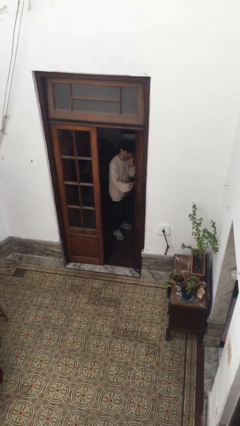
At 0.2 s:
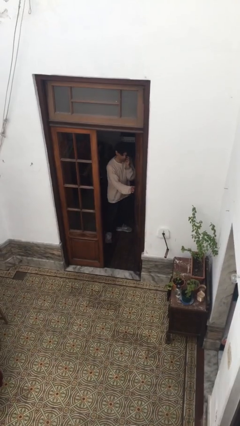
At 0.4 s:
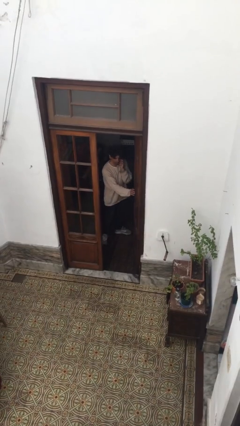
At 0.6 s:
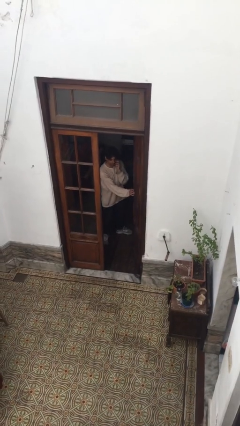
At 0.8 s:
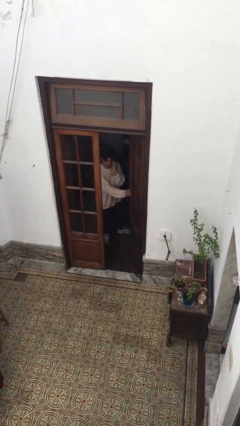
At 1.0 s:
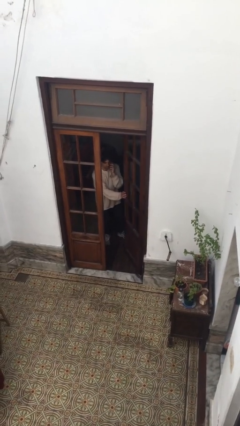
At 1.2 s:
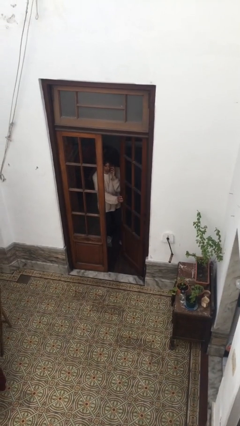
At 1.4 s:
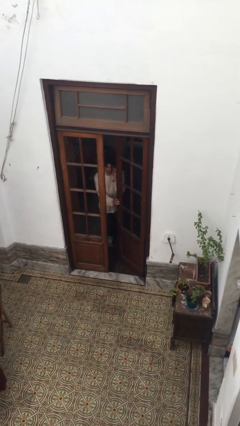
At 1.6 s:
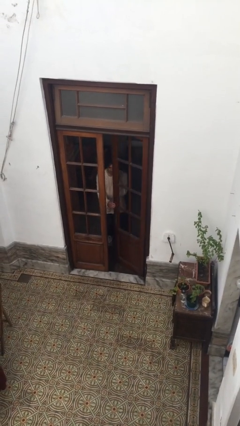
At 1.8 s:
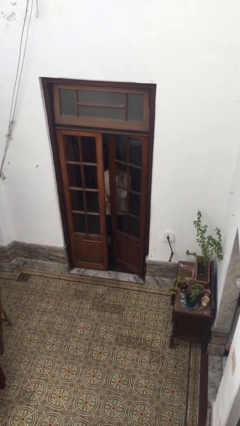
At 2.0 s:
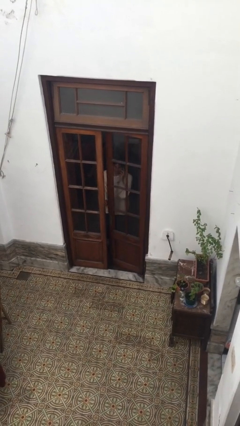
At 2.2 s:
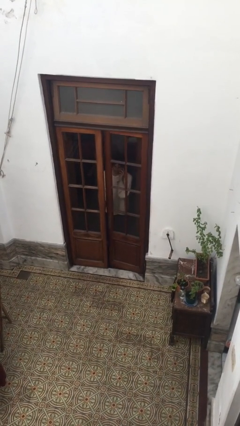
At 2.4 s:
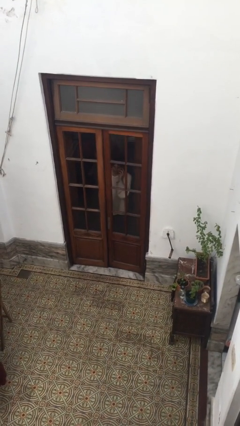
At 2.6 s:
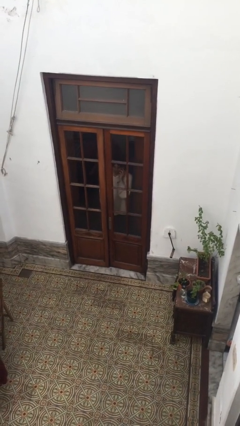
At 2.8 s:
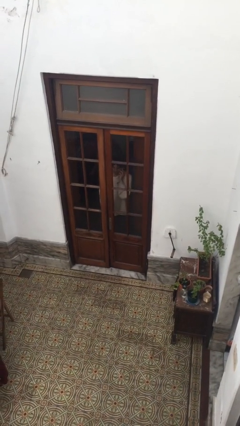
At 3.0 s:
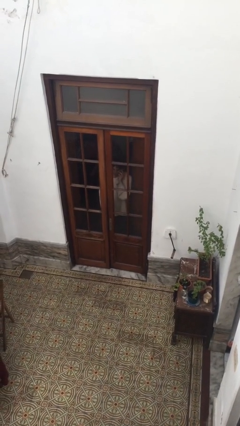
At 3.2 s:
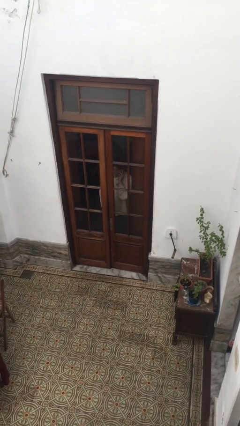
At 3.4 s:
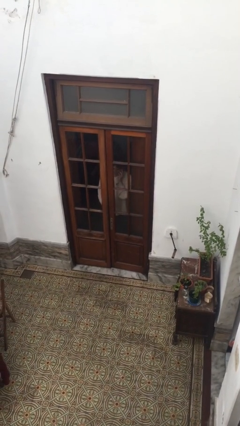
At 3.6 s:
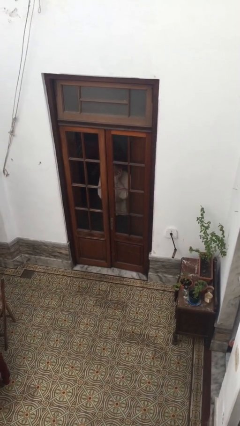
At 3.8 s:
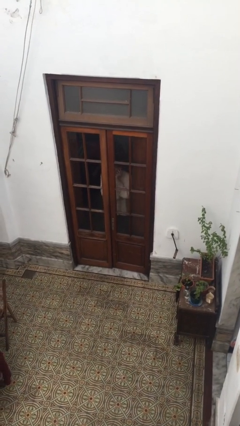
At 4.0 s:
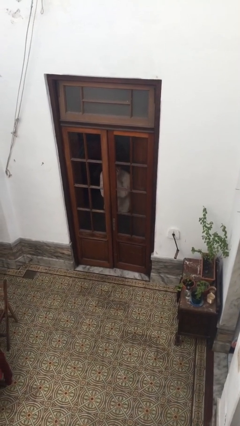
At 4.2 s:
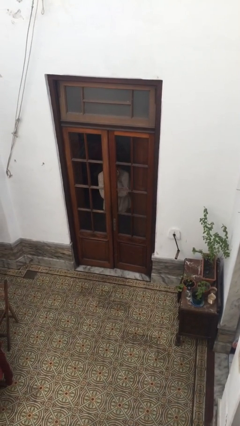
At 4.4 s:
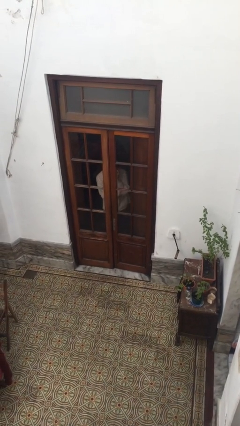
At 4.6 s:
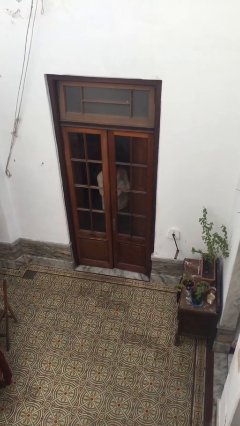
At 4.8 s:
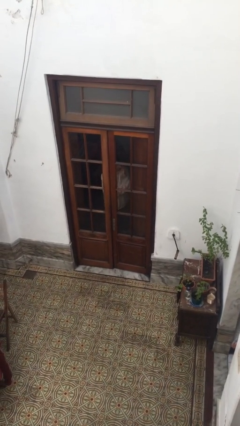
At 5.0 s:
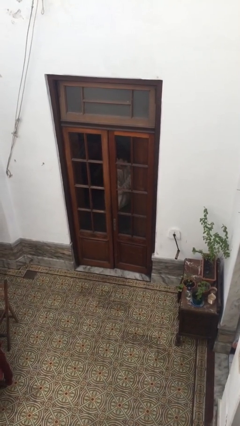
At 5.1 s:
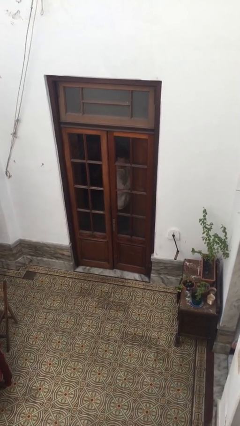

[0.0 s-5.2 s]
person closes facility door

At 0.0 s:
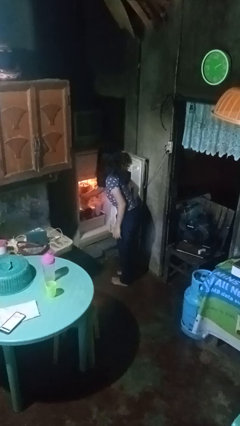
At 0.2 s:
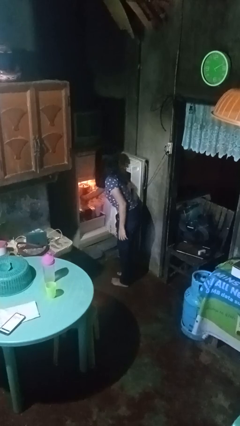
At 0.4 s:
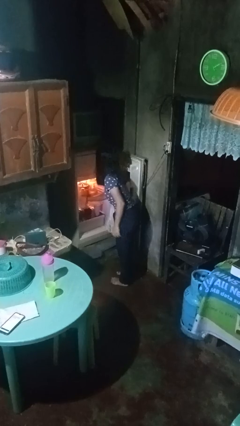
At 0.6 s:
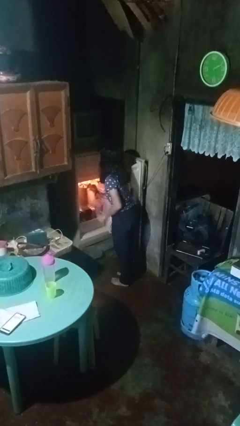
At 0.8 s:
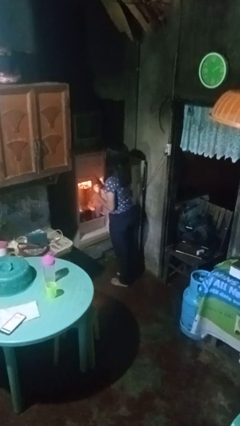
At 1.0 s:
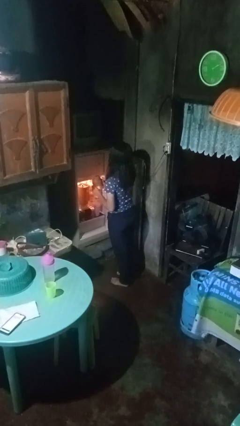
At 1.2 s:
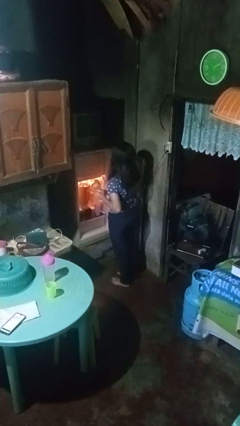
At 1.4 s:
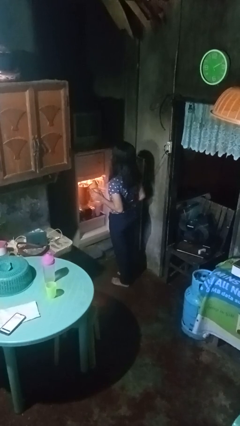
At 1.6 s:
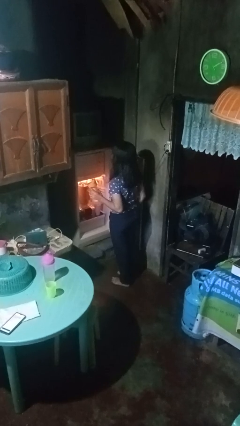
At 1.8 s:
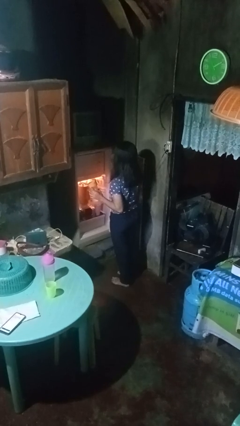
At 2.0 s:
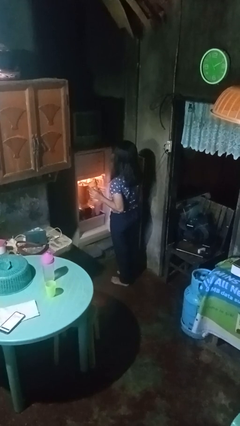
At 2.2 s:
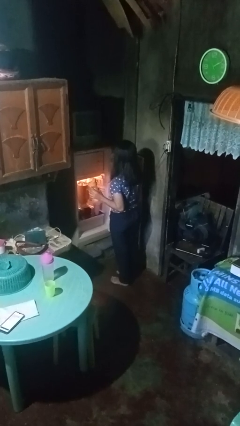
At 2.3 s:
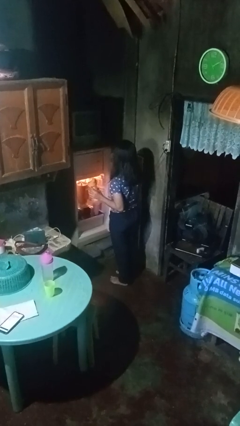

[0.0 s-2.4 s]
person takes object from refrigerator

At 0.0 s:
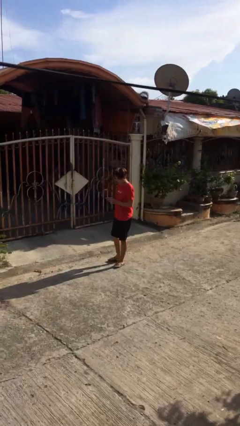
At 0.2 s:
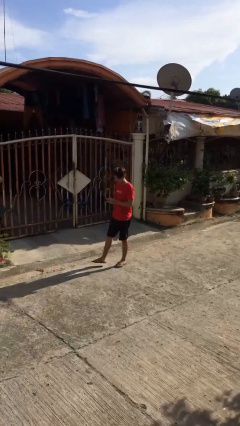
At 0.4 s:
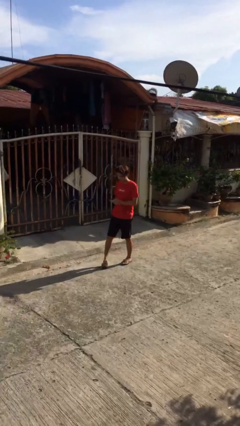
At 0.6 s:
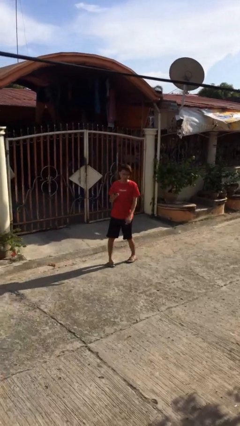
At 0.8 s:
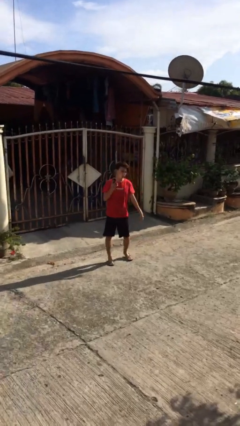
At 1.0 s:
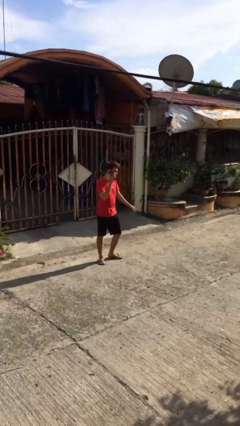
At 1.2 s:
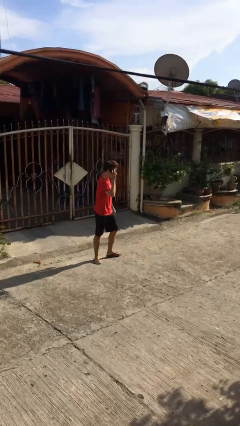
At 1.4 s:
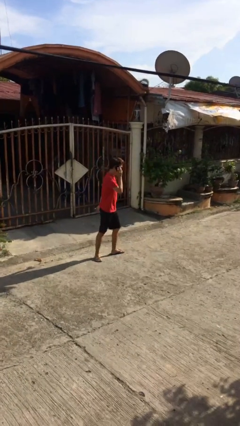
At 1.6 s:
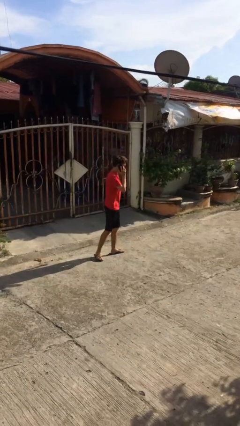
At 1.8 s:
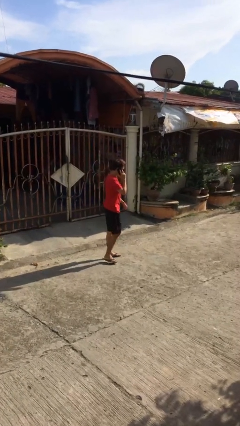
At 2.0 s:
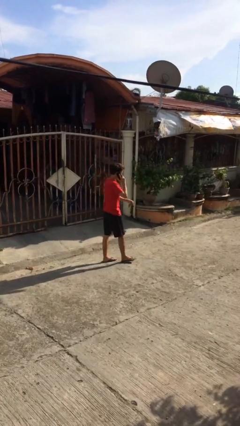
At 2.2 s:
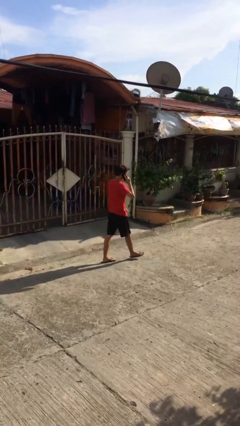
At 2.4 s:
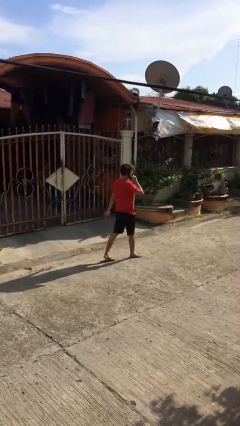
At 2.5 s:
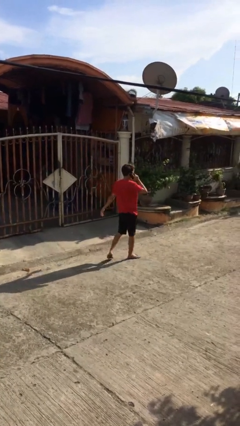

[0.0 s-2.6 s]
person talks on phone

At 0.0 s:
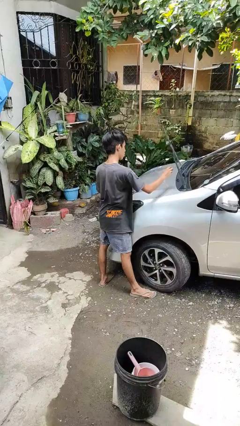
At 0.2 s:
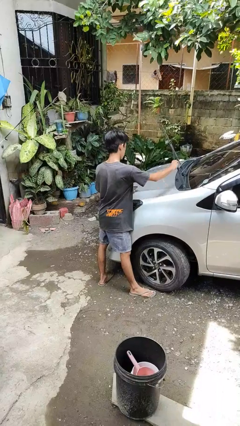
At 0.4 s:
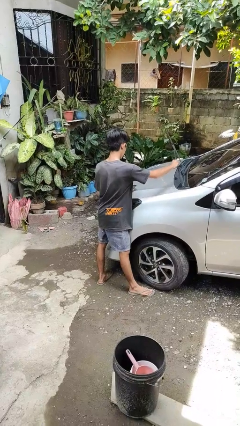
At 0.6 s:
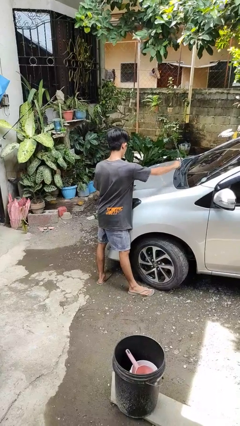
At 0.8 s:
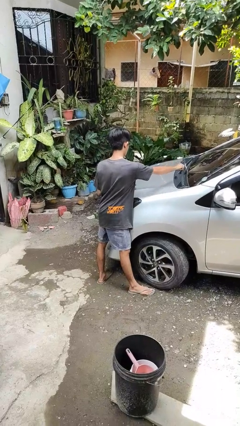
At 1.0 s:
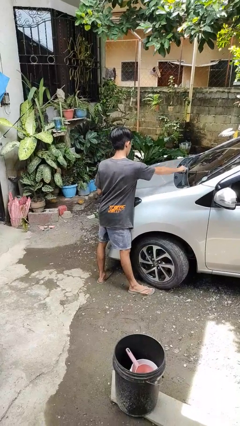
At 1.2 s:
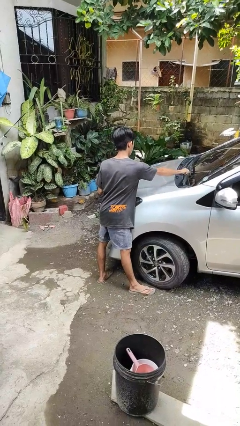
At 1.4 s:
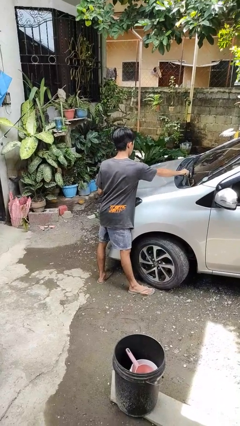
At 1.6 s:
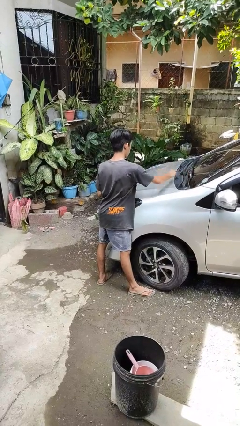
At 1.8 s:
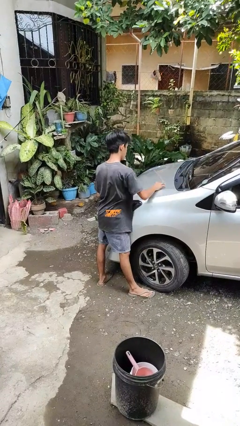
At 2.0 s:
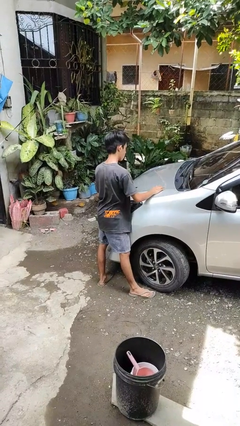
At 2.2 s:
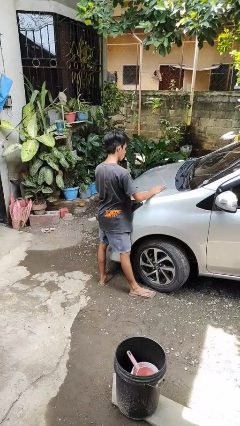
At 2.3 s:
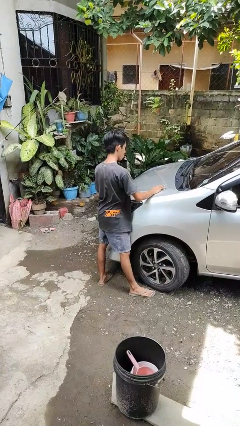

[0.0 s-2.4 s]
person flips down car wipers

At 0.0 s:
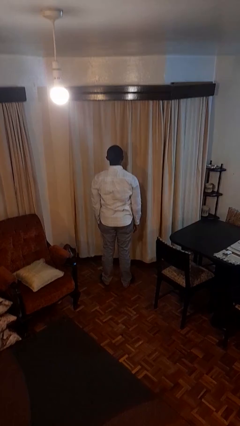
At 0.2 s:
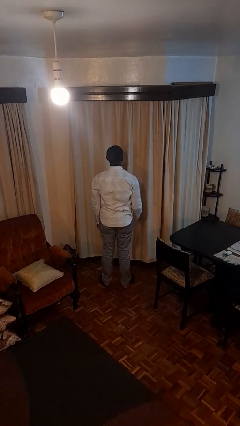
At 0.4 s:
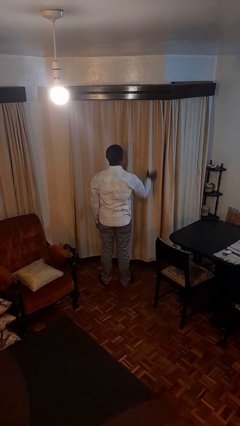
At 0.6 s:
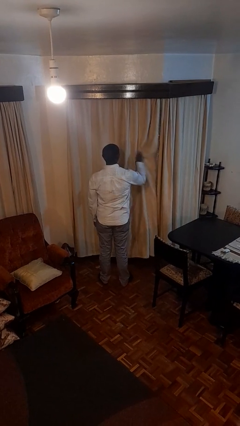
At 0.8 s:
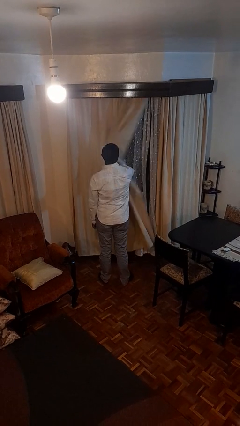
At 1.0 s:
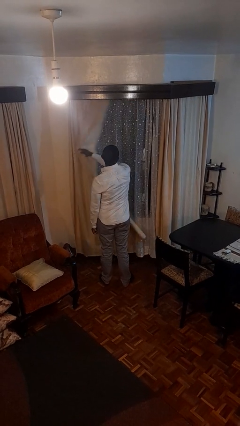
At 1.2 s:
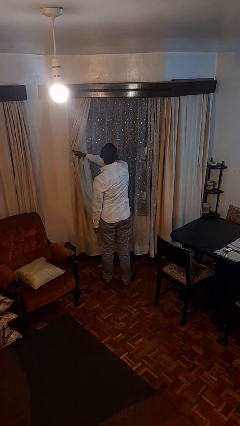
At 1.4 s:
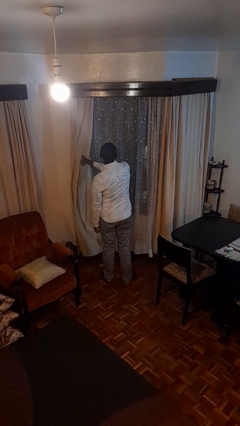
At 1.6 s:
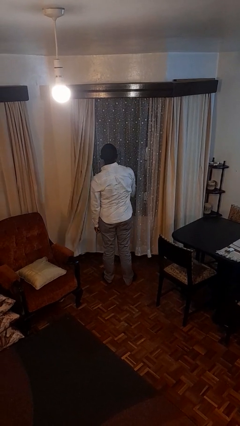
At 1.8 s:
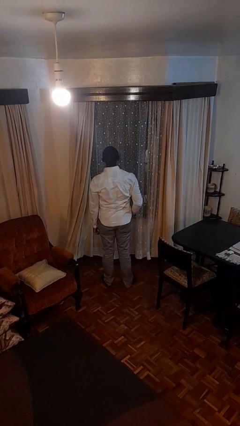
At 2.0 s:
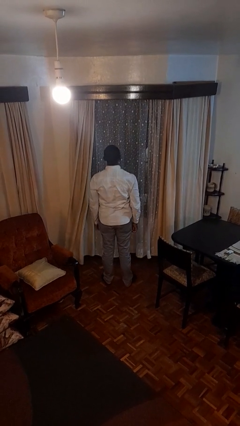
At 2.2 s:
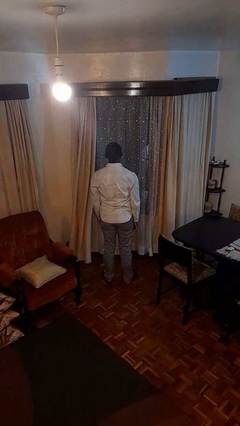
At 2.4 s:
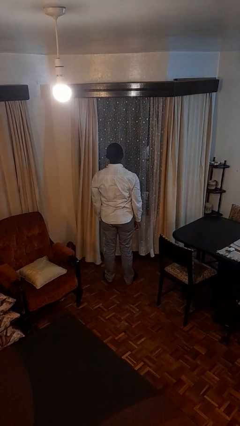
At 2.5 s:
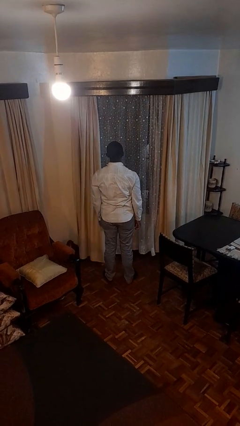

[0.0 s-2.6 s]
person opens curtains

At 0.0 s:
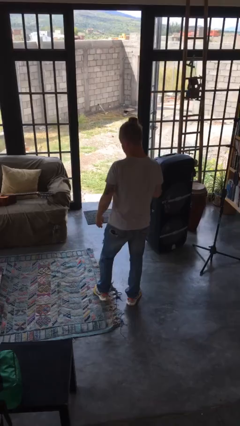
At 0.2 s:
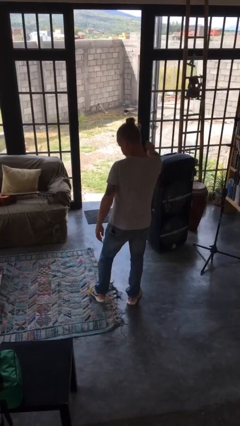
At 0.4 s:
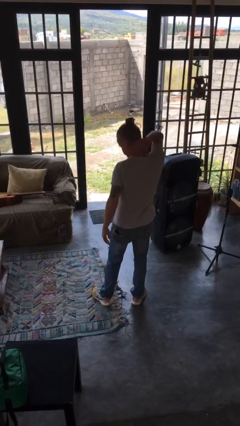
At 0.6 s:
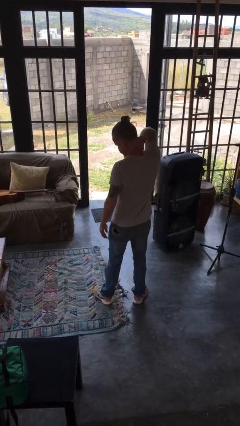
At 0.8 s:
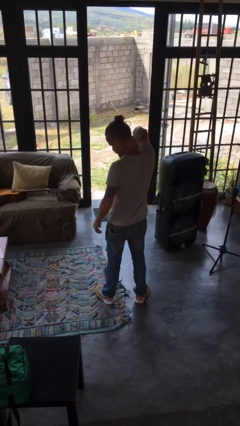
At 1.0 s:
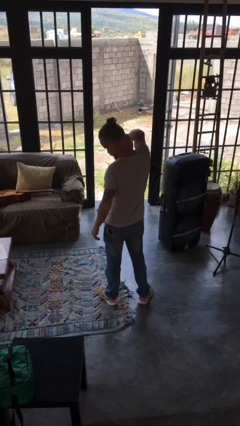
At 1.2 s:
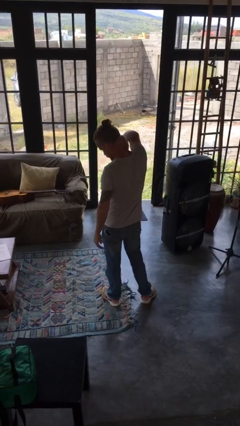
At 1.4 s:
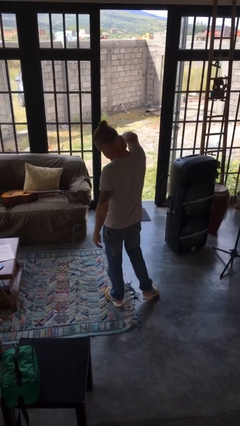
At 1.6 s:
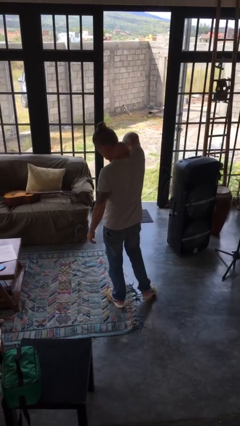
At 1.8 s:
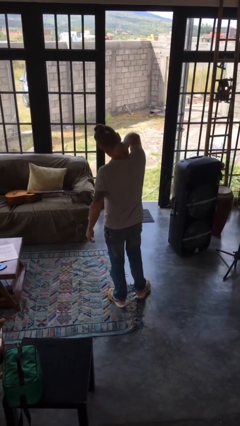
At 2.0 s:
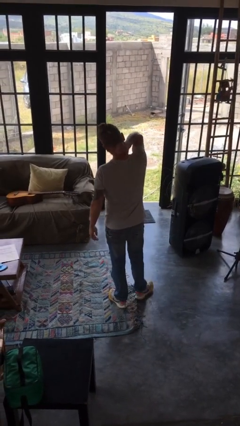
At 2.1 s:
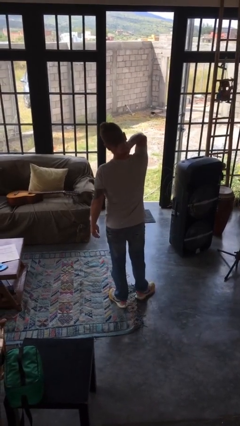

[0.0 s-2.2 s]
person rubs neck
